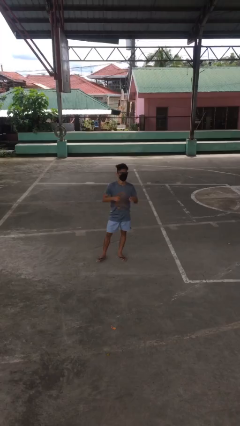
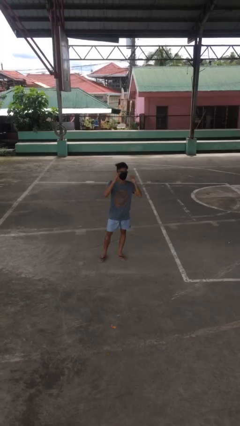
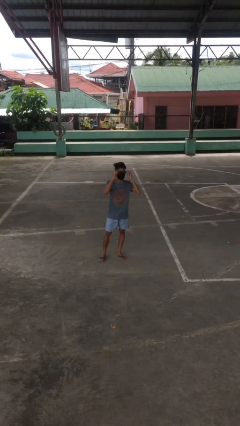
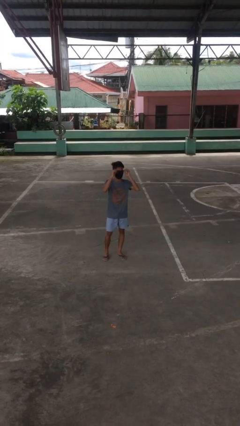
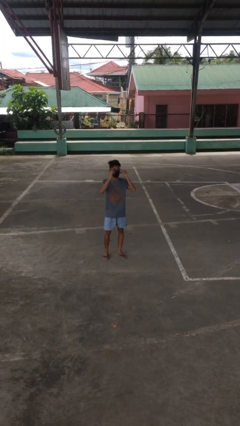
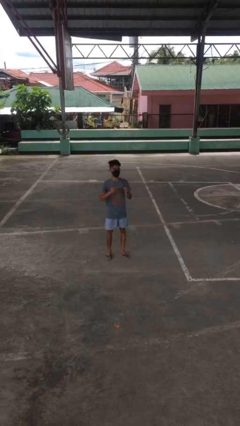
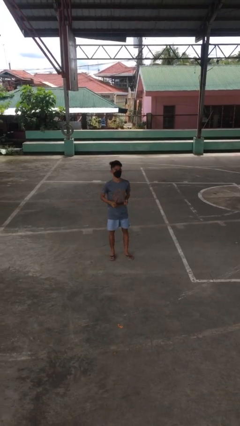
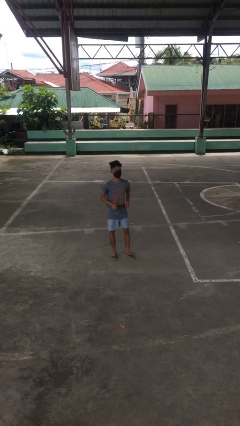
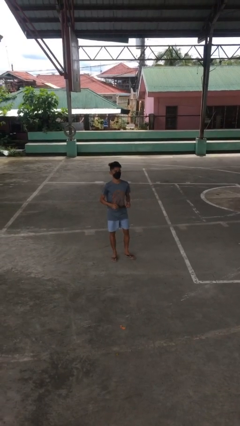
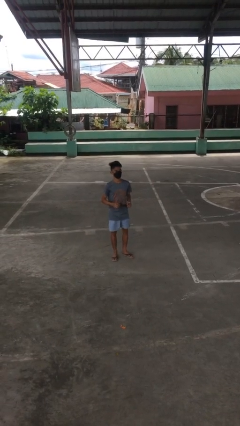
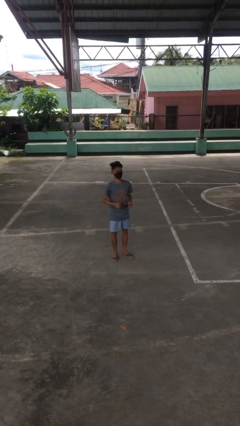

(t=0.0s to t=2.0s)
person takes off glasses

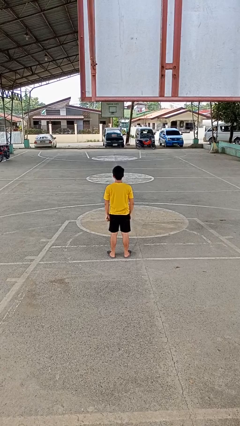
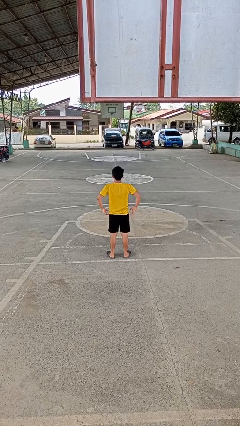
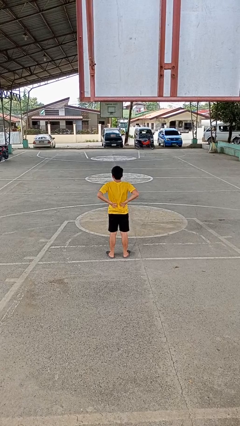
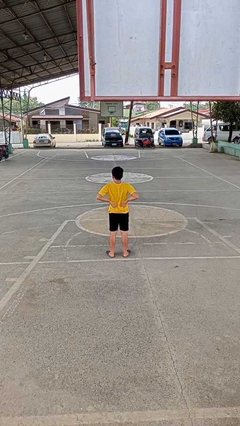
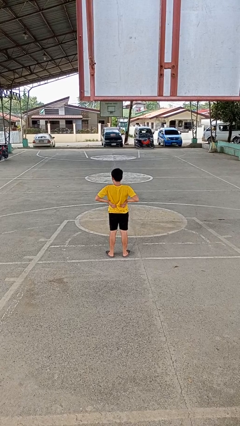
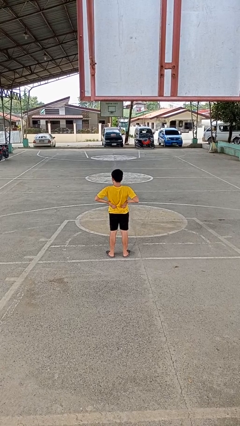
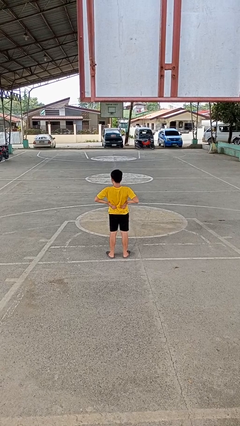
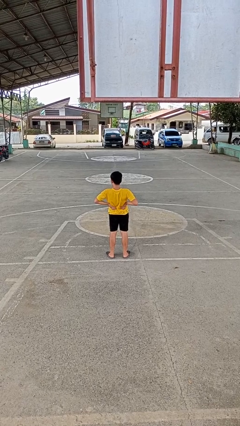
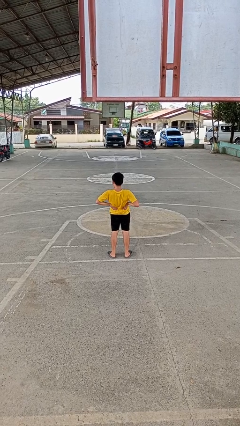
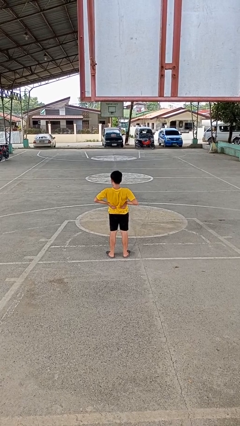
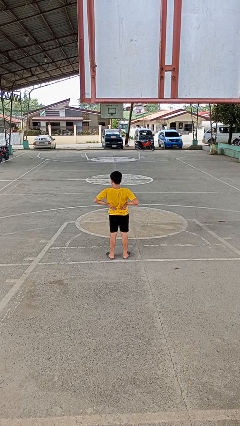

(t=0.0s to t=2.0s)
person stretches back

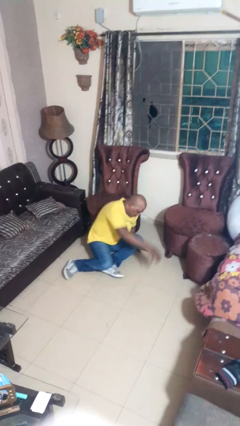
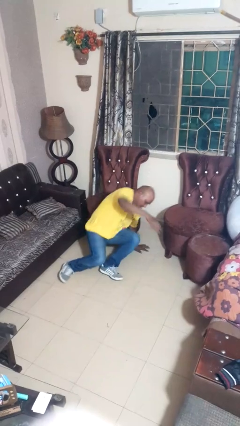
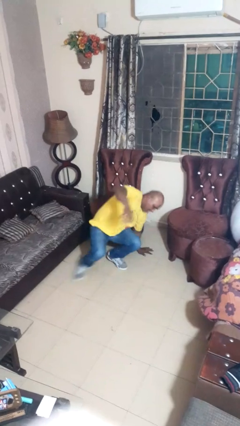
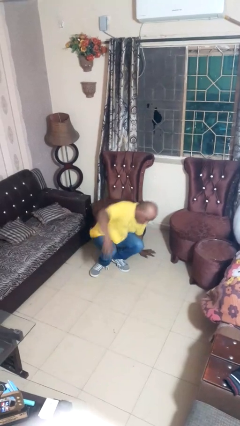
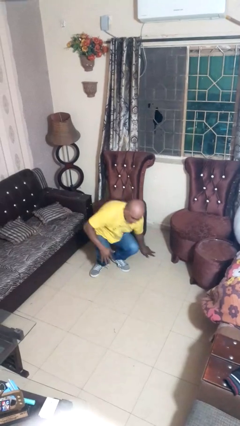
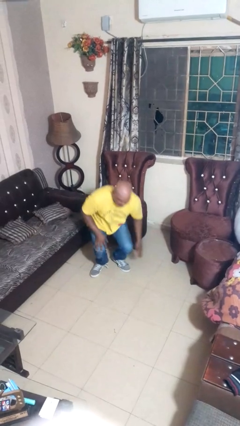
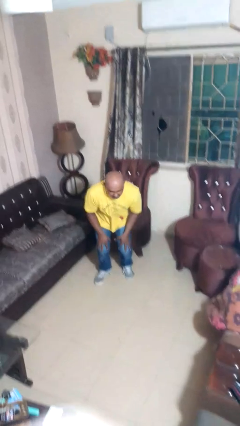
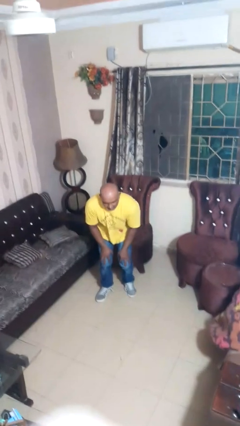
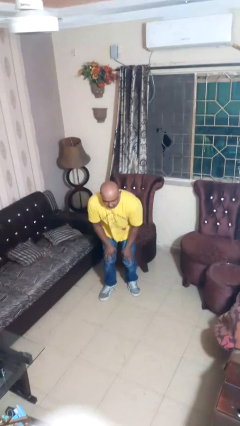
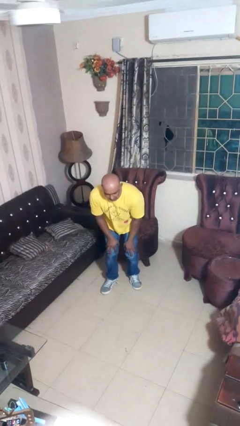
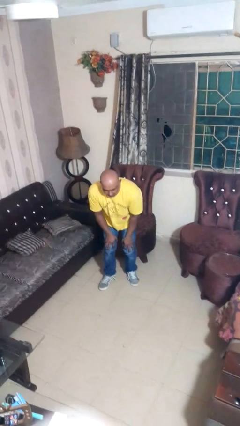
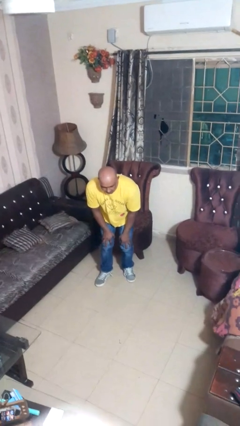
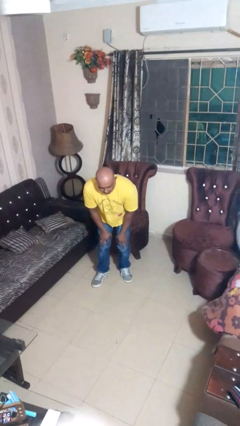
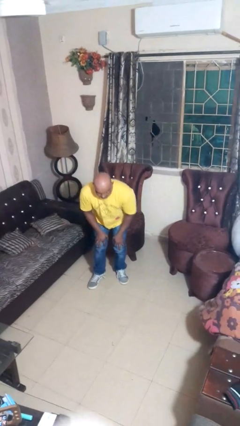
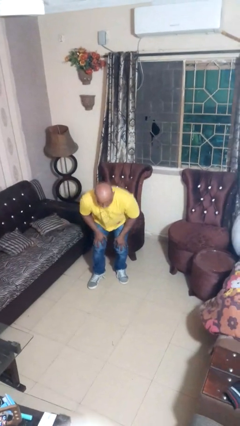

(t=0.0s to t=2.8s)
person stands up from floor

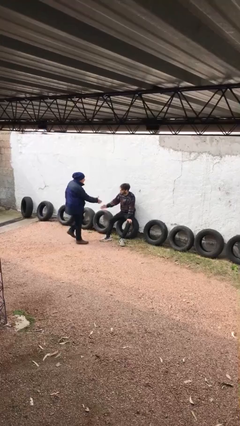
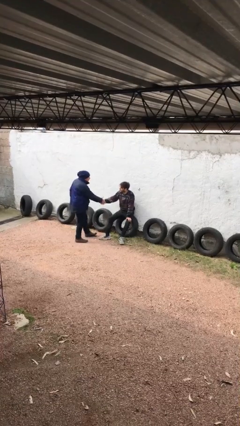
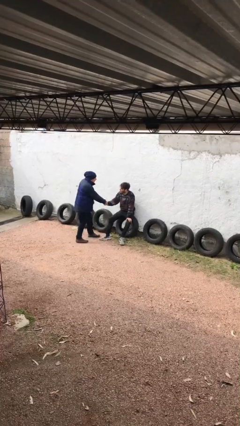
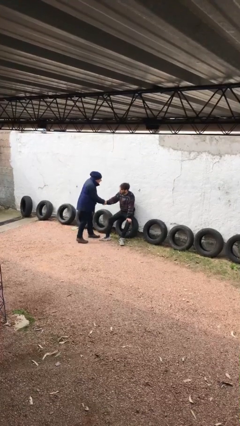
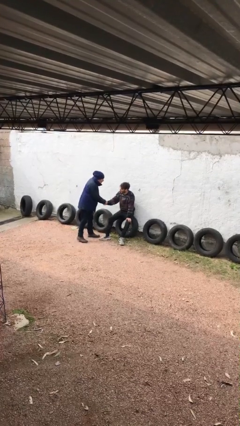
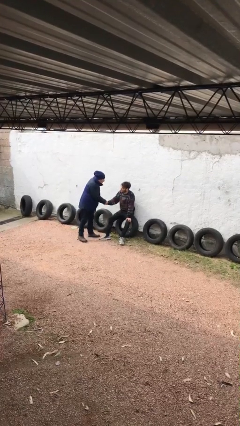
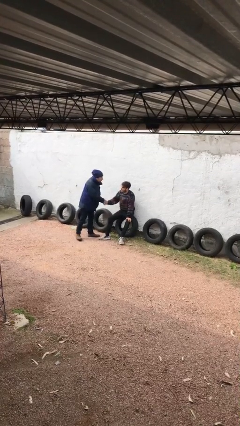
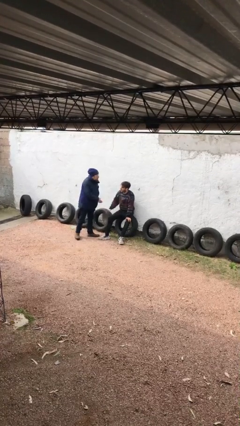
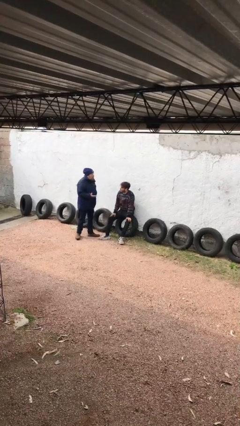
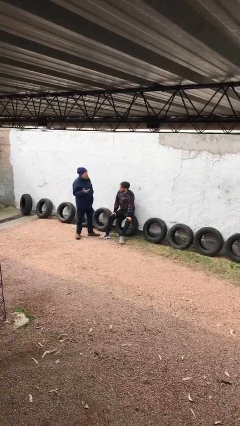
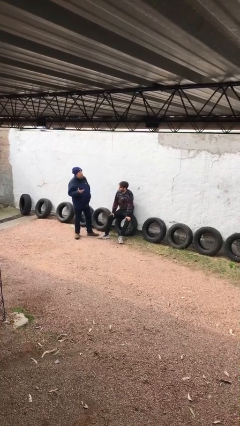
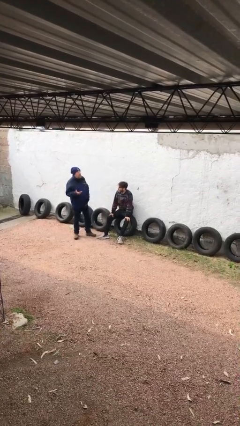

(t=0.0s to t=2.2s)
person shakes hand

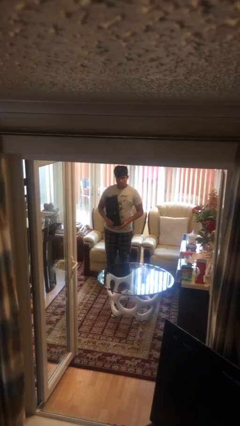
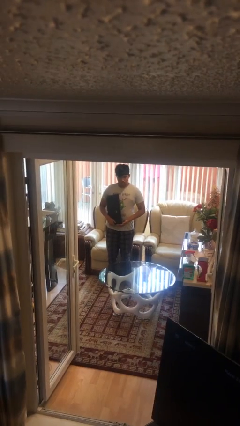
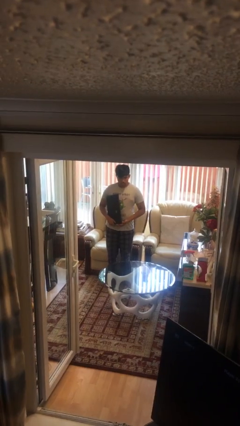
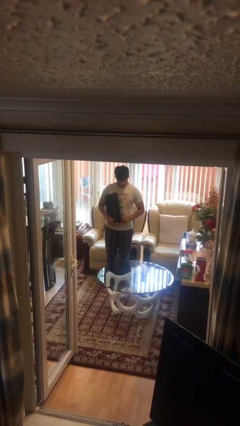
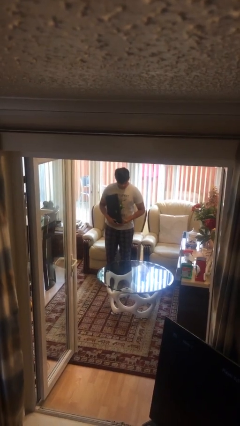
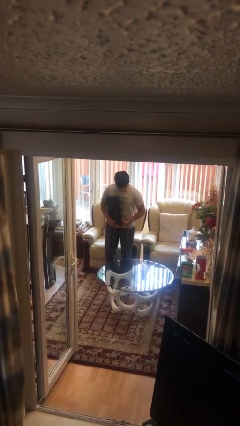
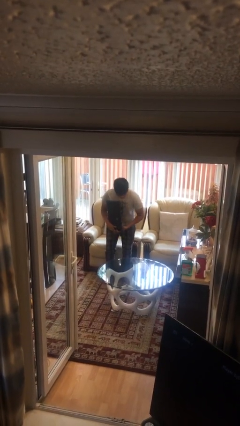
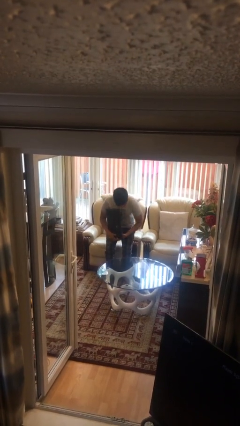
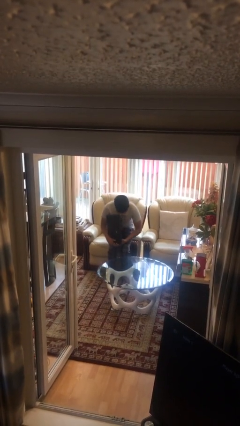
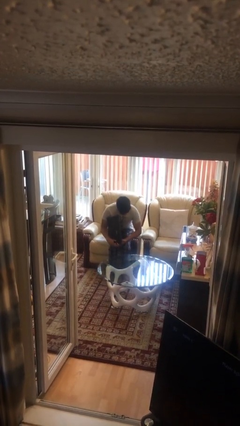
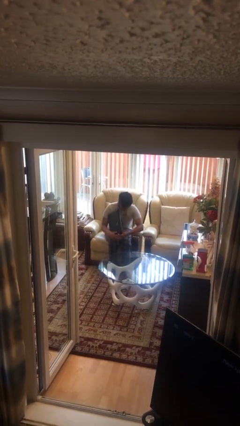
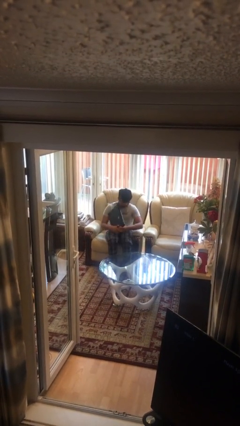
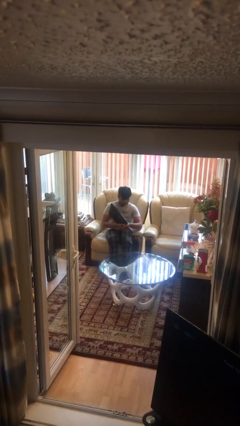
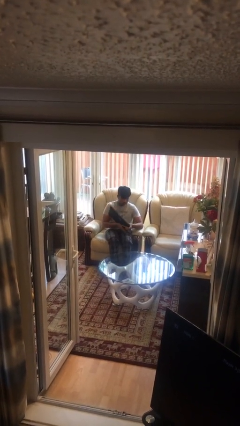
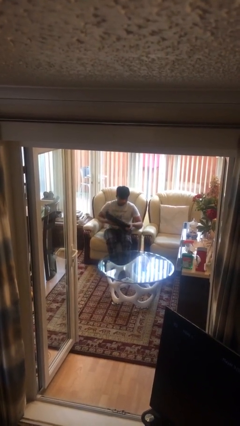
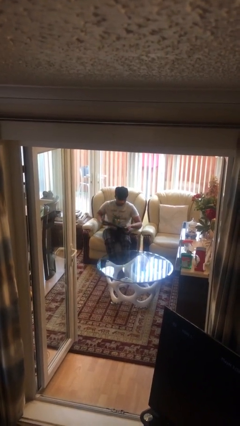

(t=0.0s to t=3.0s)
person sits down

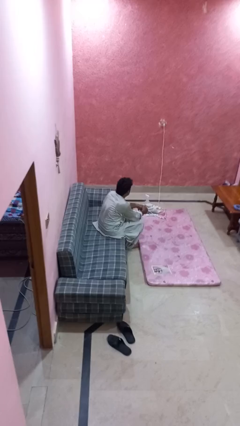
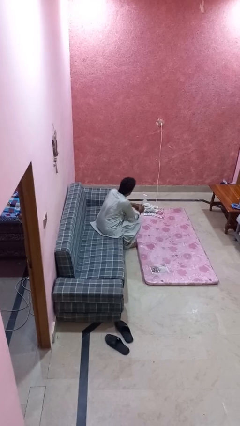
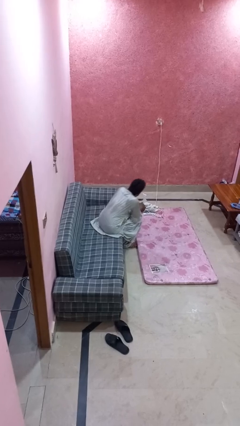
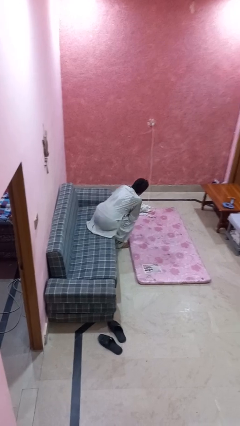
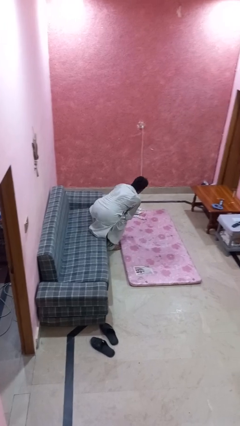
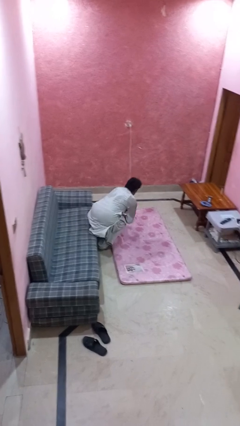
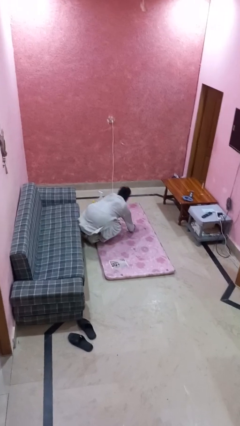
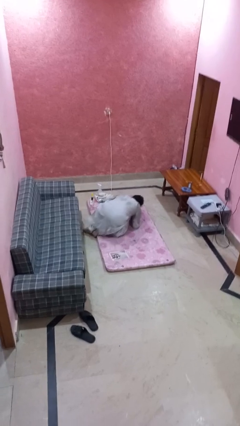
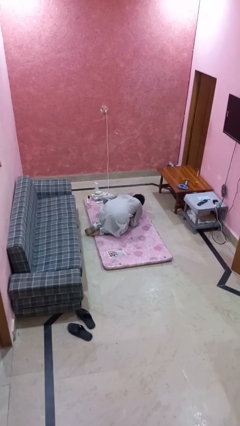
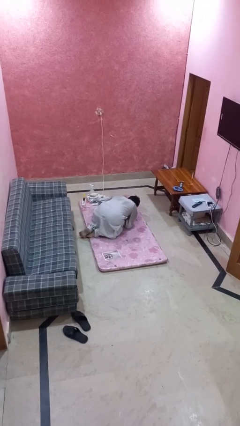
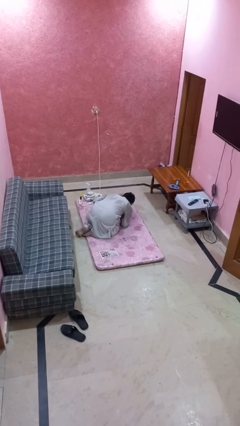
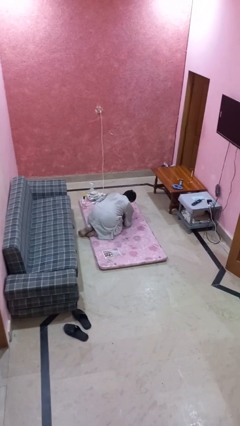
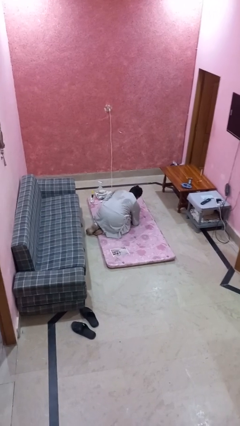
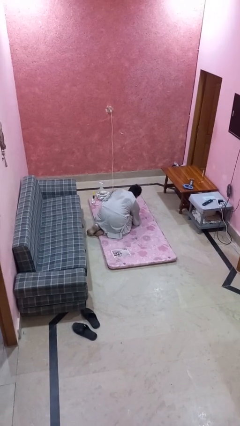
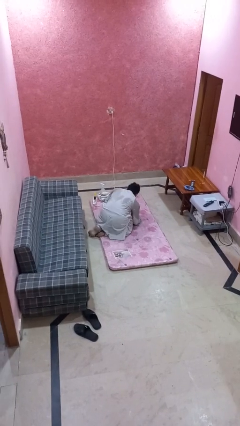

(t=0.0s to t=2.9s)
person falls from chair

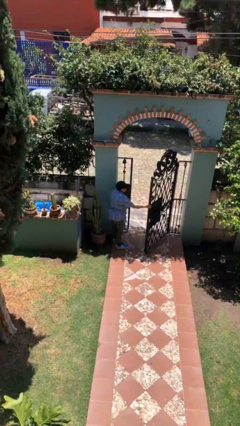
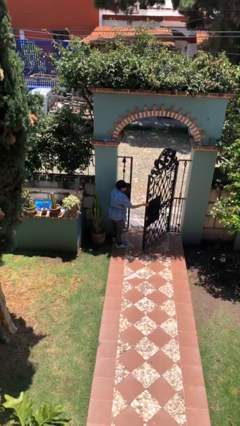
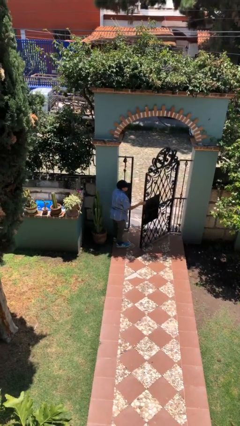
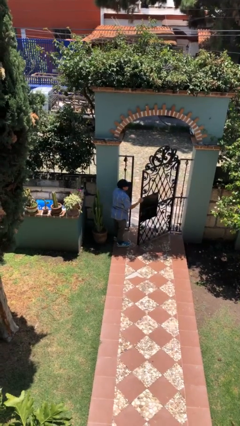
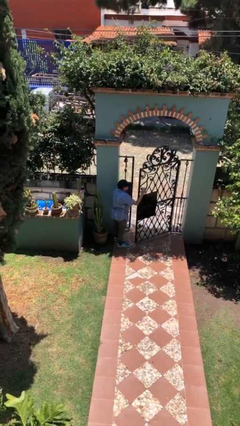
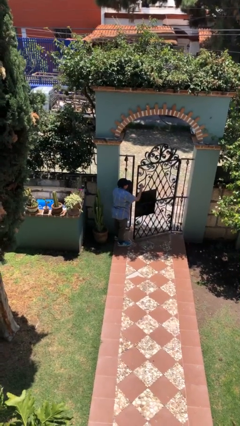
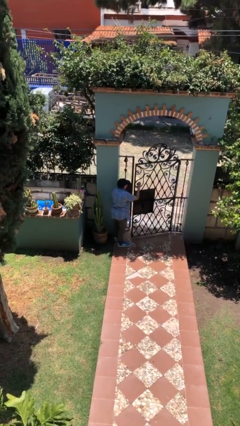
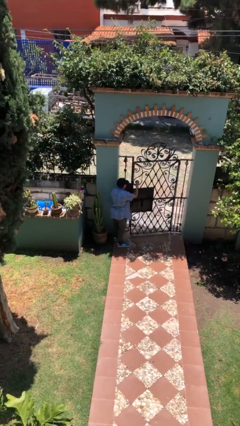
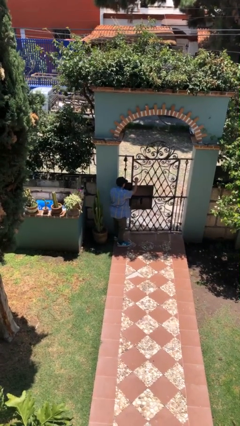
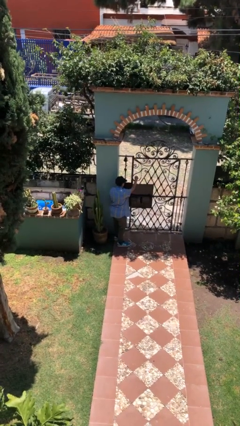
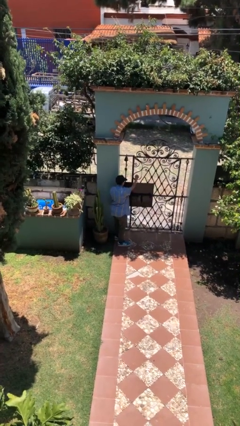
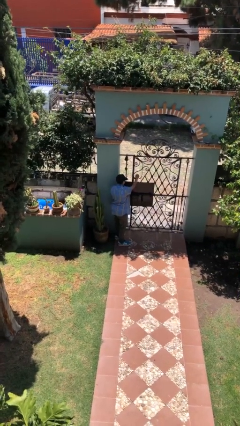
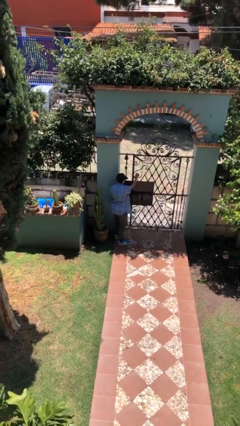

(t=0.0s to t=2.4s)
person closes facility door
